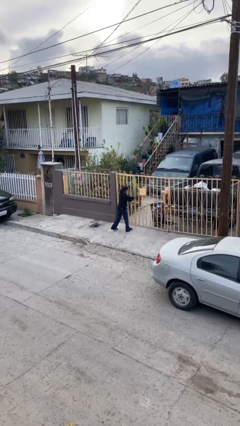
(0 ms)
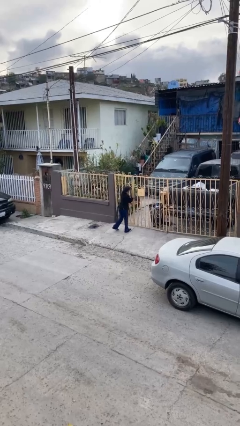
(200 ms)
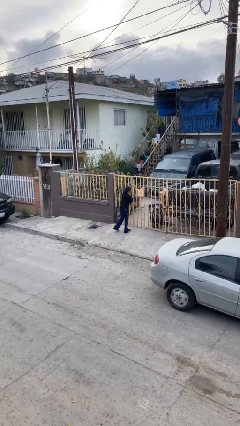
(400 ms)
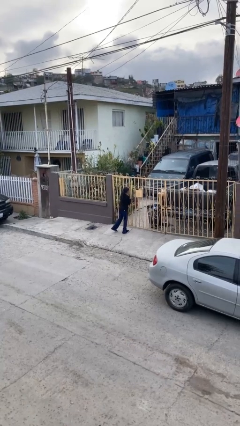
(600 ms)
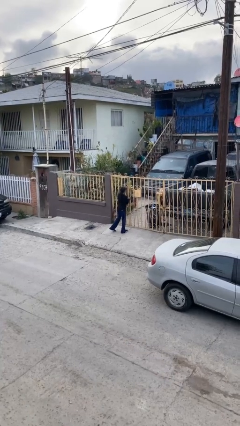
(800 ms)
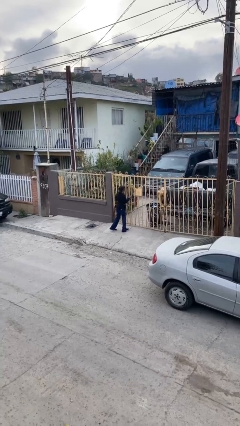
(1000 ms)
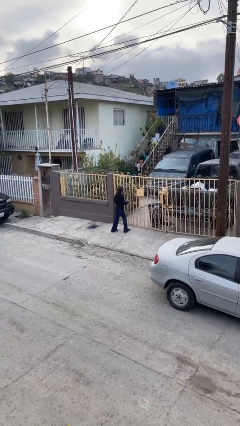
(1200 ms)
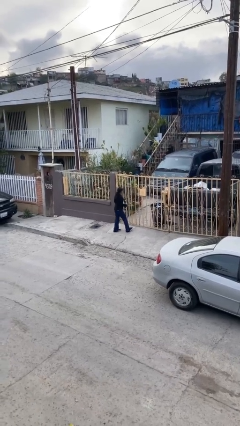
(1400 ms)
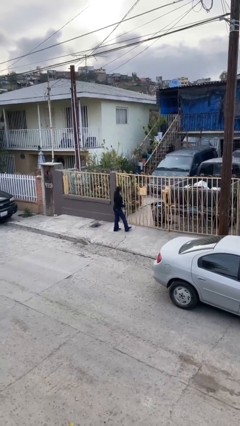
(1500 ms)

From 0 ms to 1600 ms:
person opens facility door

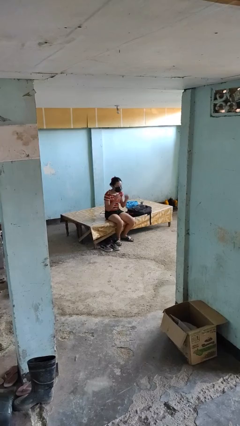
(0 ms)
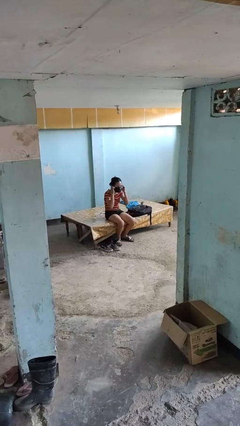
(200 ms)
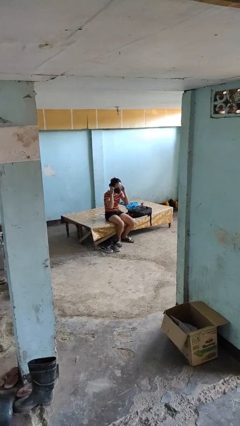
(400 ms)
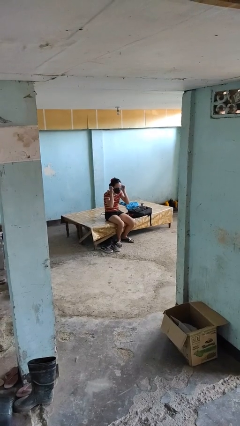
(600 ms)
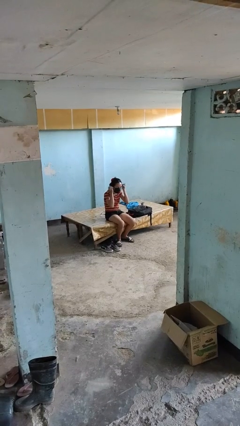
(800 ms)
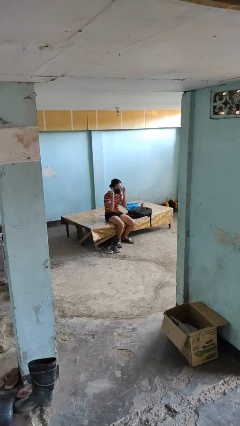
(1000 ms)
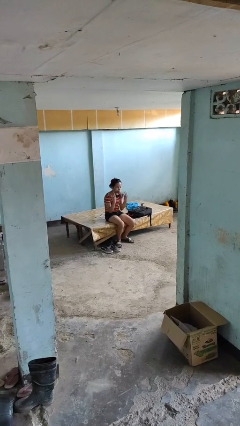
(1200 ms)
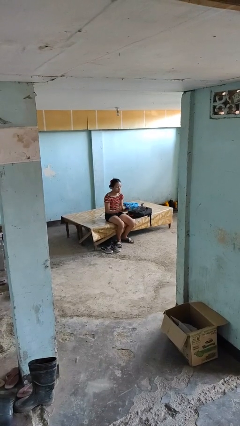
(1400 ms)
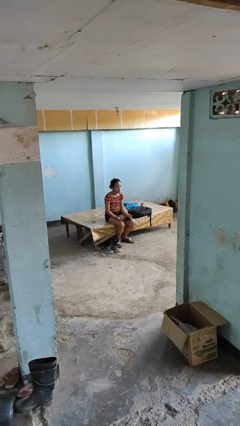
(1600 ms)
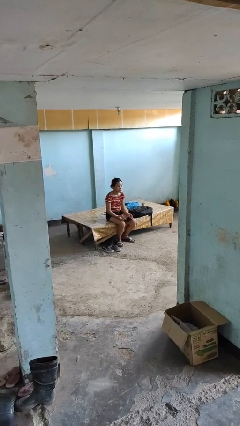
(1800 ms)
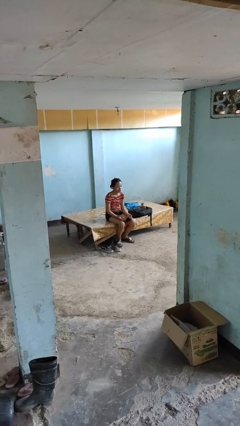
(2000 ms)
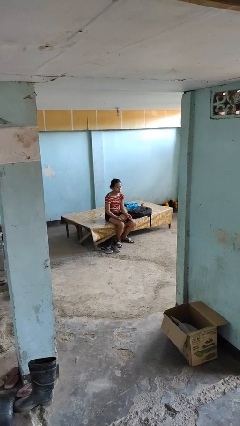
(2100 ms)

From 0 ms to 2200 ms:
person takes off facemask

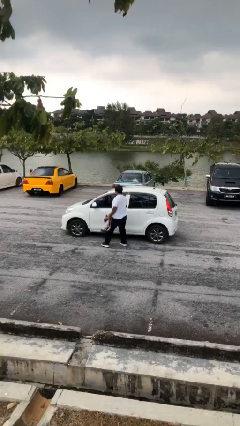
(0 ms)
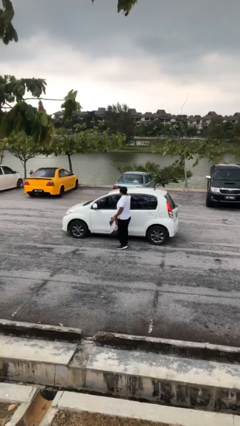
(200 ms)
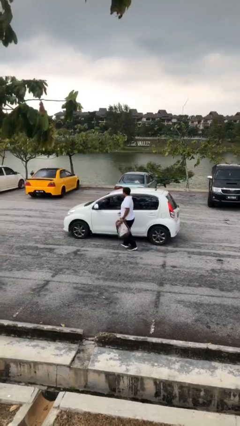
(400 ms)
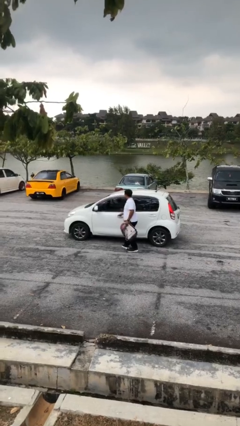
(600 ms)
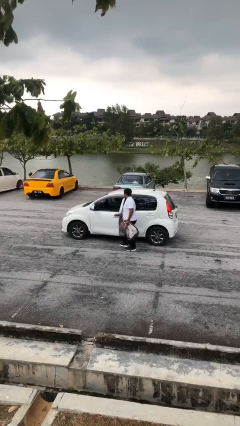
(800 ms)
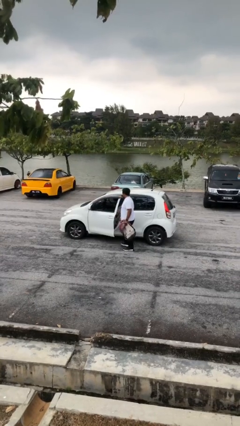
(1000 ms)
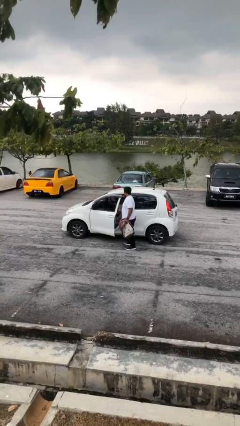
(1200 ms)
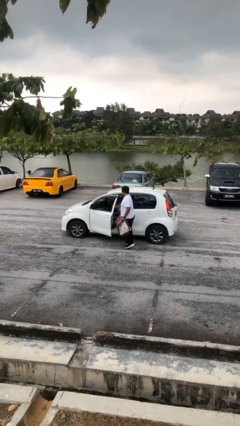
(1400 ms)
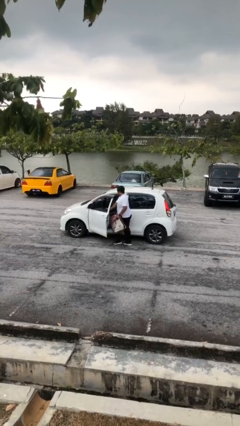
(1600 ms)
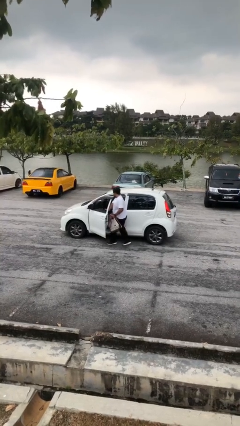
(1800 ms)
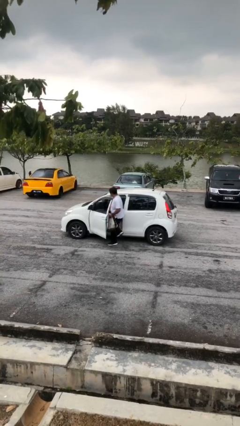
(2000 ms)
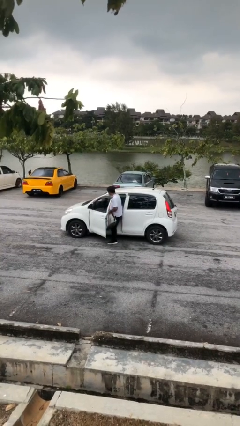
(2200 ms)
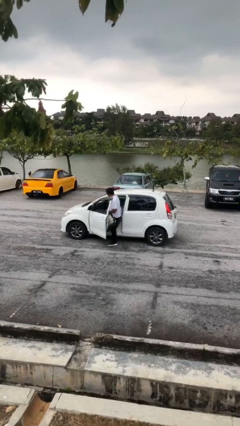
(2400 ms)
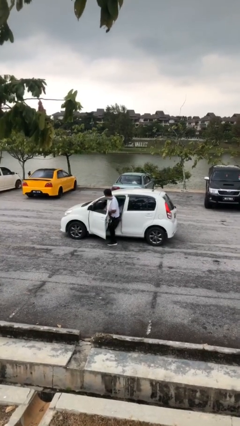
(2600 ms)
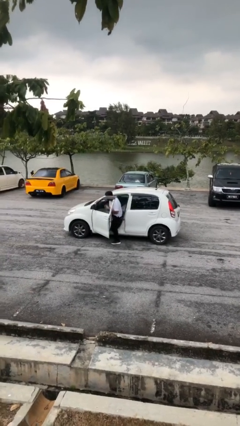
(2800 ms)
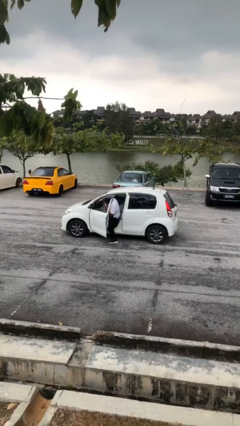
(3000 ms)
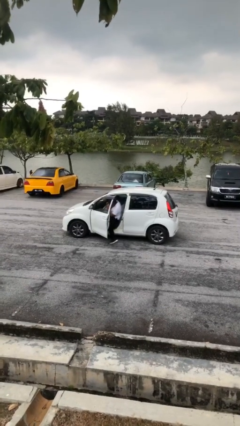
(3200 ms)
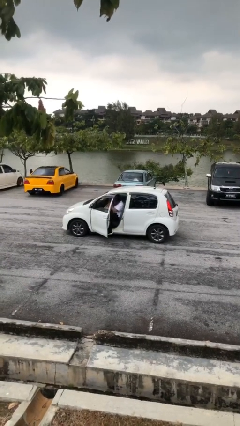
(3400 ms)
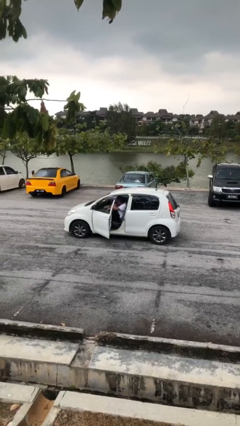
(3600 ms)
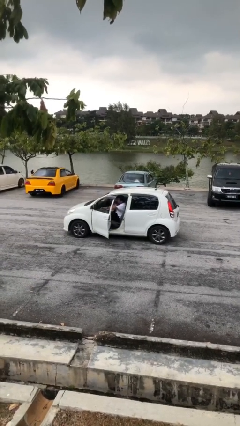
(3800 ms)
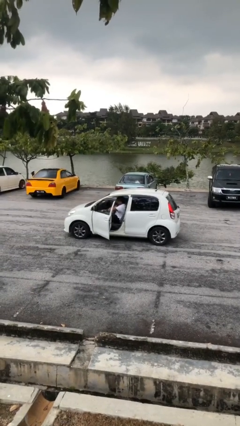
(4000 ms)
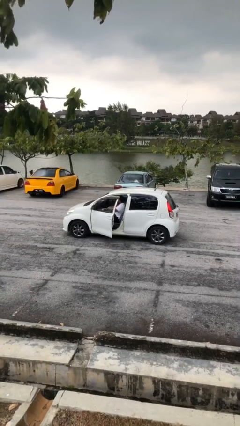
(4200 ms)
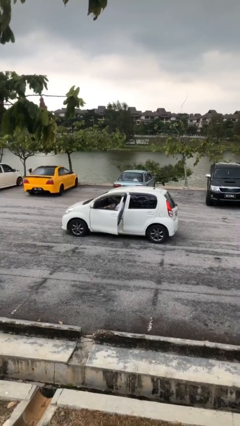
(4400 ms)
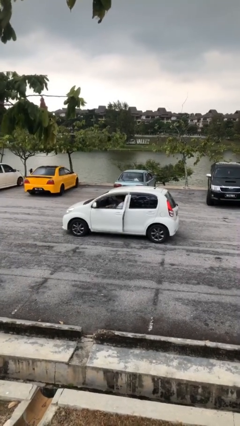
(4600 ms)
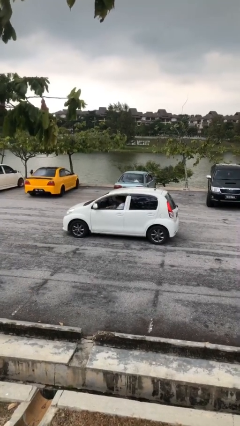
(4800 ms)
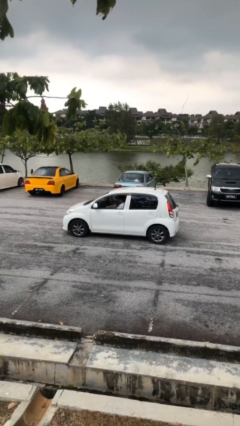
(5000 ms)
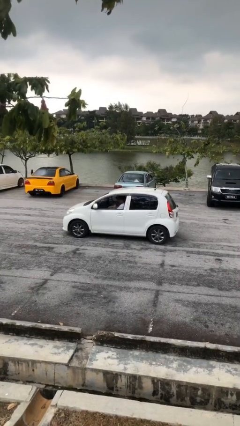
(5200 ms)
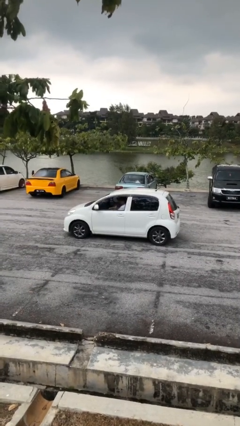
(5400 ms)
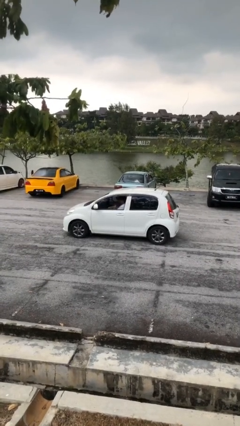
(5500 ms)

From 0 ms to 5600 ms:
car picks up person

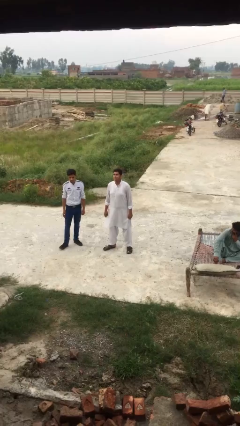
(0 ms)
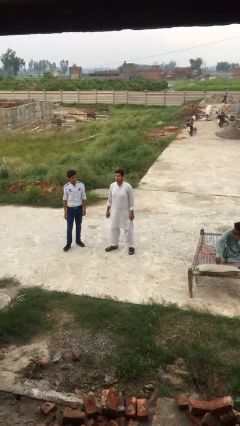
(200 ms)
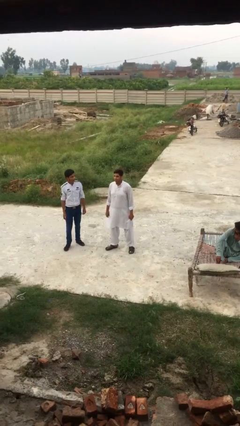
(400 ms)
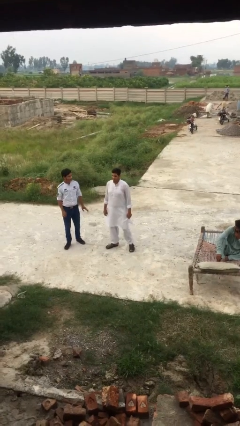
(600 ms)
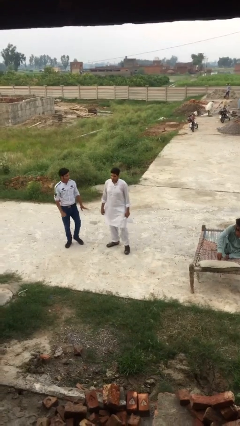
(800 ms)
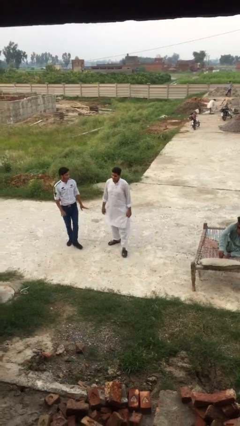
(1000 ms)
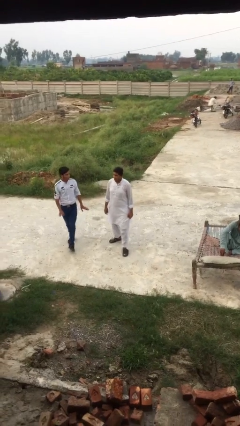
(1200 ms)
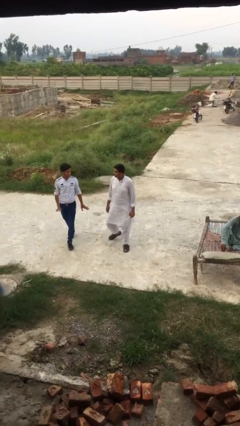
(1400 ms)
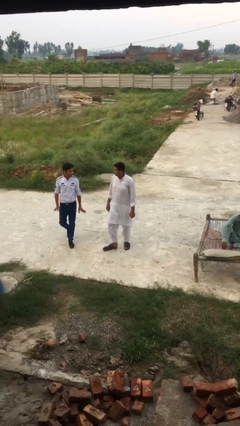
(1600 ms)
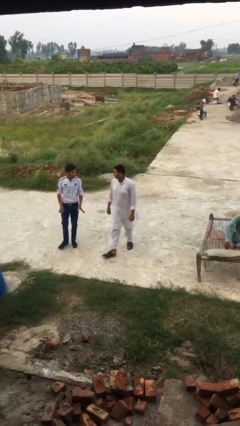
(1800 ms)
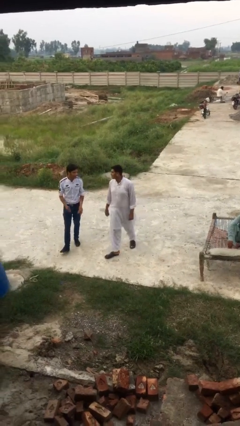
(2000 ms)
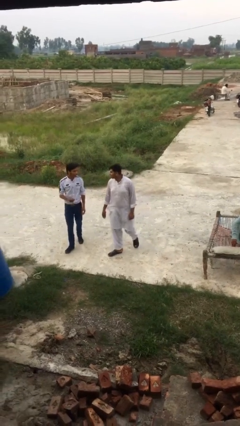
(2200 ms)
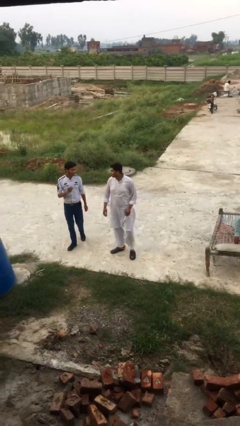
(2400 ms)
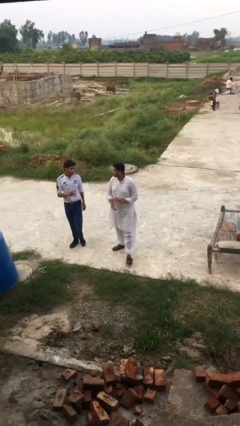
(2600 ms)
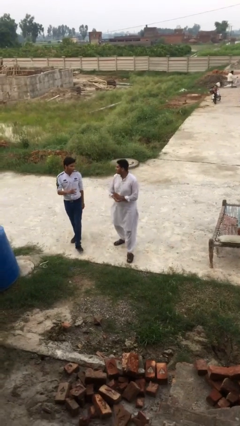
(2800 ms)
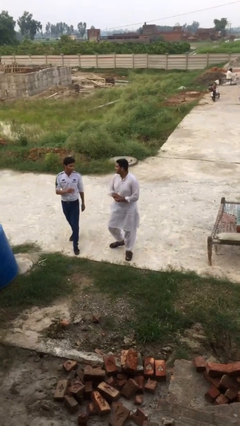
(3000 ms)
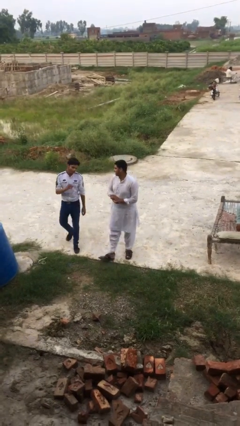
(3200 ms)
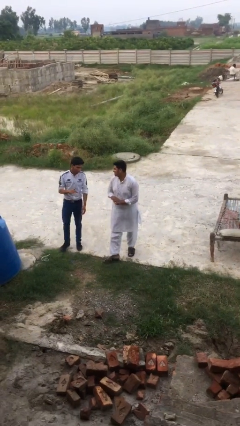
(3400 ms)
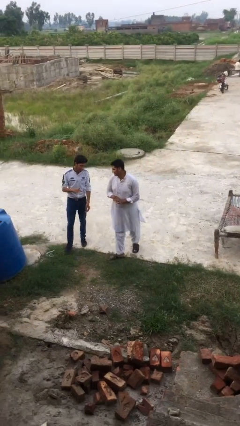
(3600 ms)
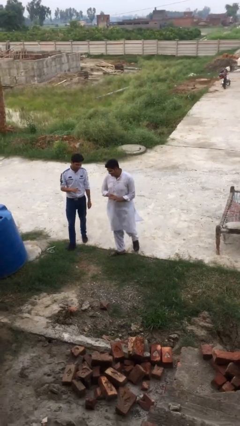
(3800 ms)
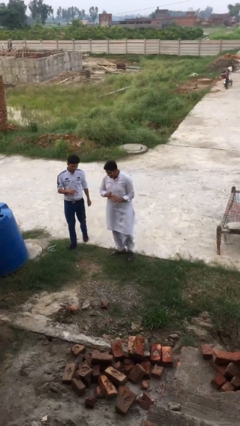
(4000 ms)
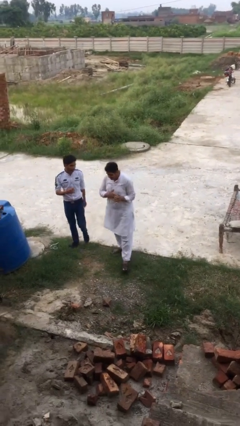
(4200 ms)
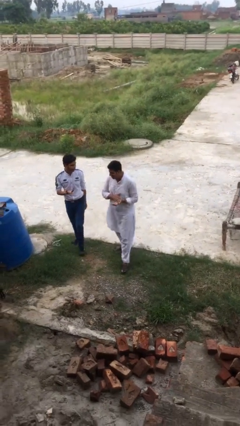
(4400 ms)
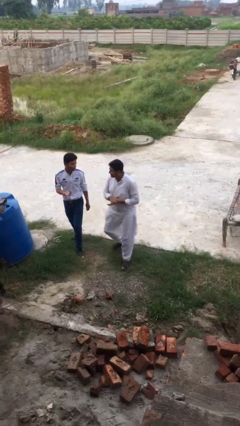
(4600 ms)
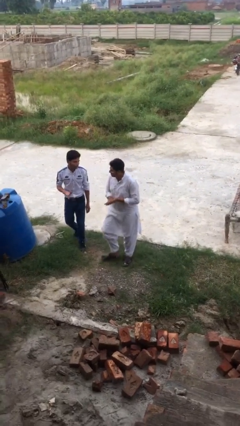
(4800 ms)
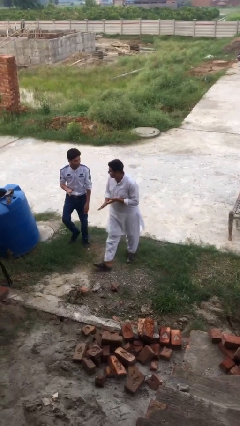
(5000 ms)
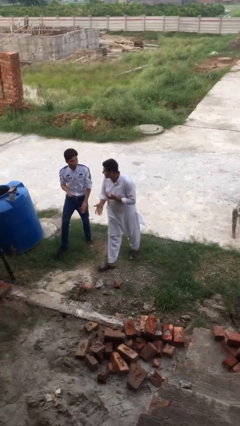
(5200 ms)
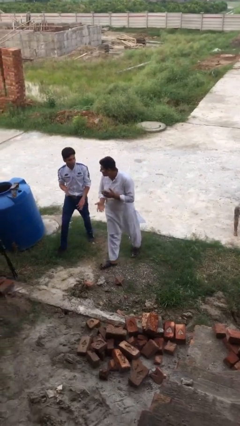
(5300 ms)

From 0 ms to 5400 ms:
person talks to person

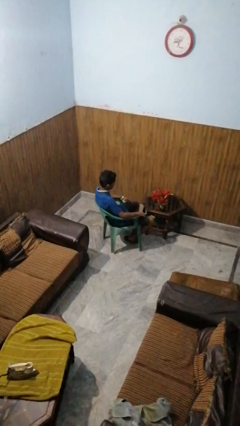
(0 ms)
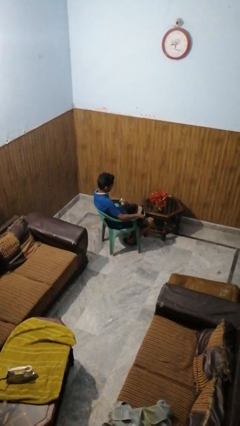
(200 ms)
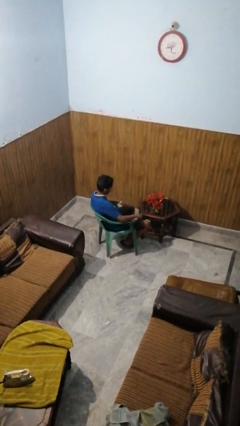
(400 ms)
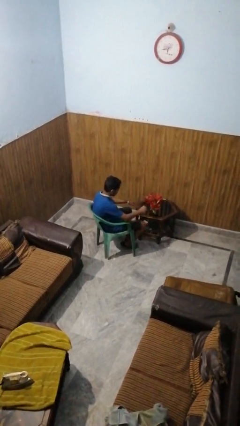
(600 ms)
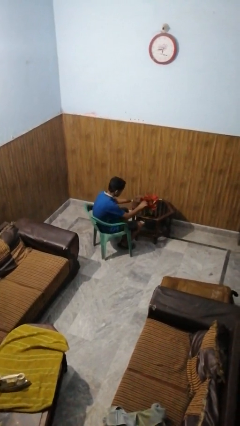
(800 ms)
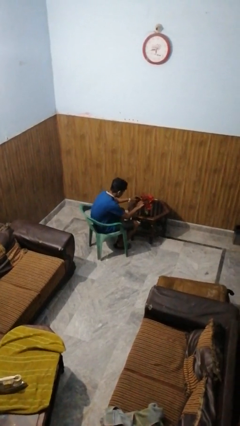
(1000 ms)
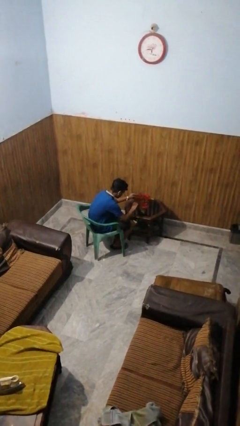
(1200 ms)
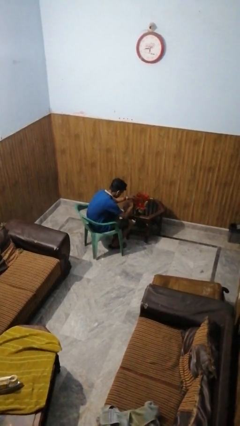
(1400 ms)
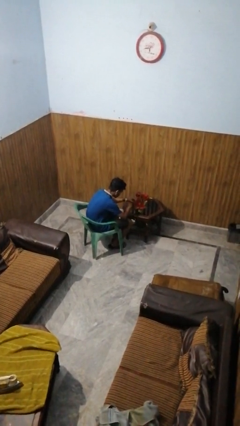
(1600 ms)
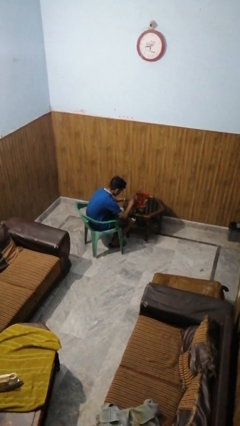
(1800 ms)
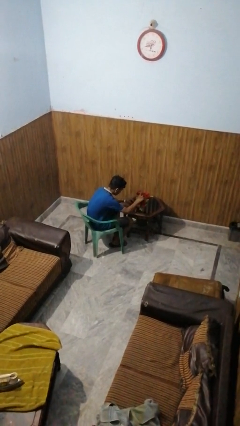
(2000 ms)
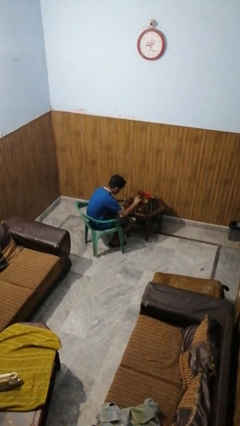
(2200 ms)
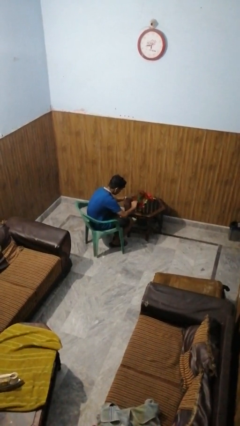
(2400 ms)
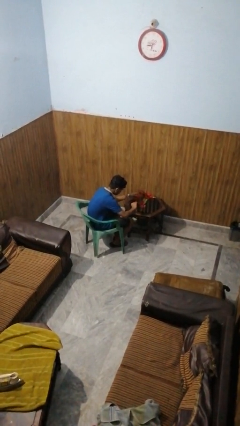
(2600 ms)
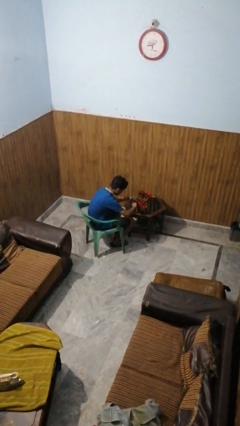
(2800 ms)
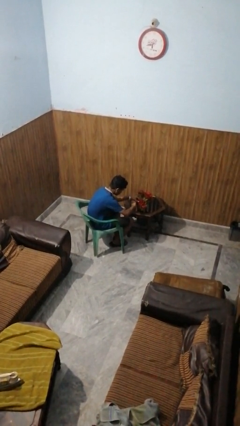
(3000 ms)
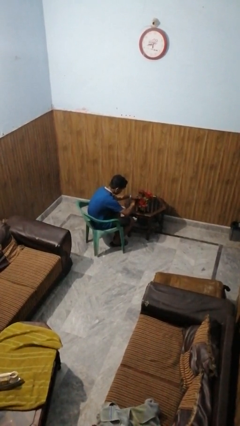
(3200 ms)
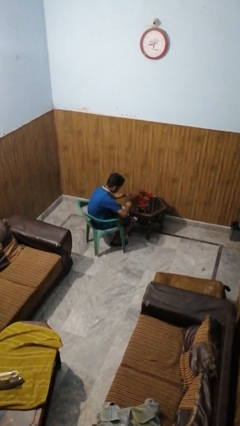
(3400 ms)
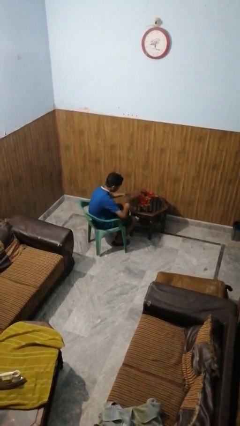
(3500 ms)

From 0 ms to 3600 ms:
person arranges flowers in vase
